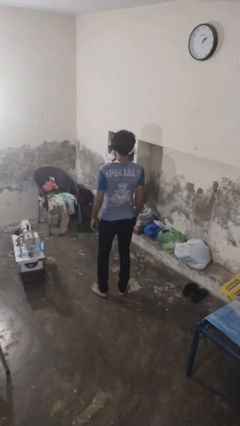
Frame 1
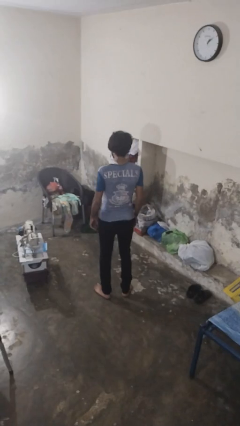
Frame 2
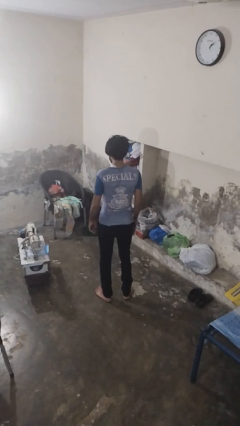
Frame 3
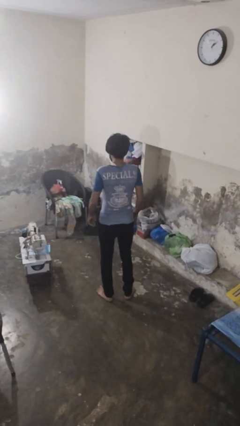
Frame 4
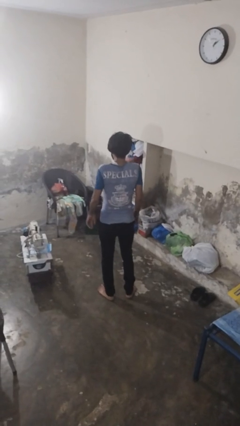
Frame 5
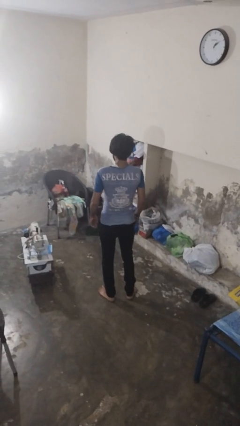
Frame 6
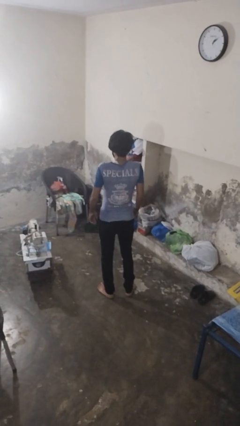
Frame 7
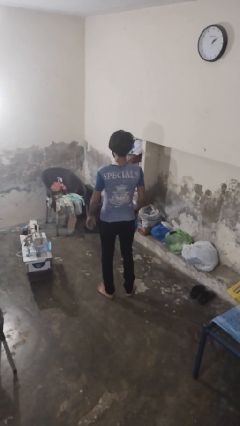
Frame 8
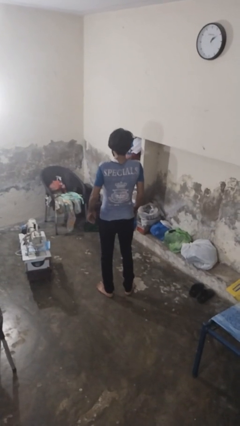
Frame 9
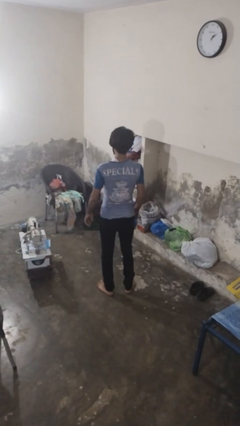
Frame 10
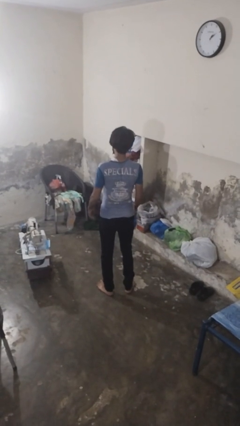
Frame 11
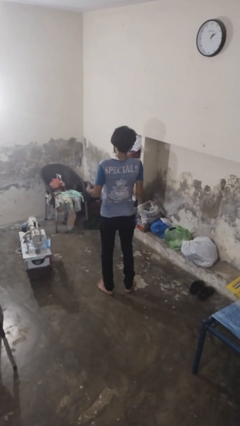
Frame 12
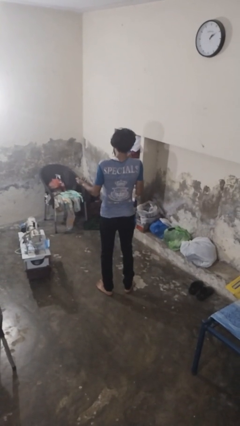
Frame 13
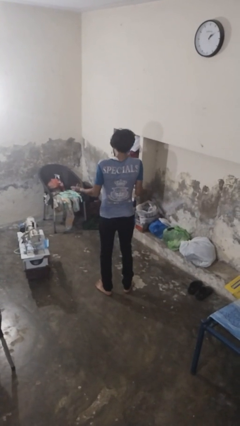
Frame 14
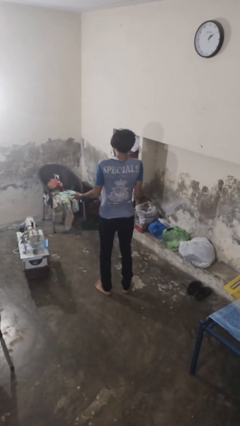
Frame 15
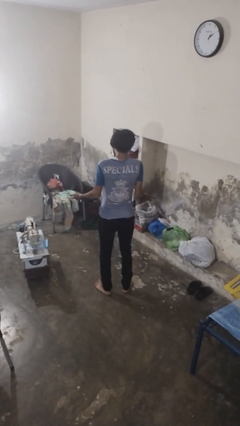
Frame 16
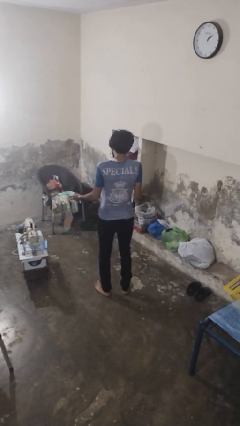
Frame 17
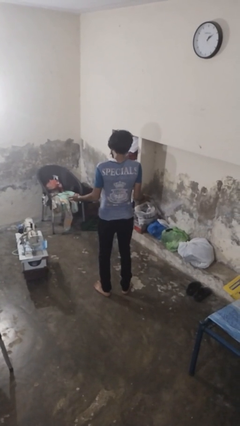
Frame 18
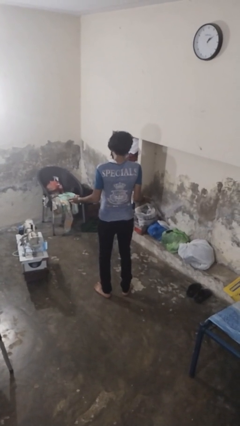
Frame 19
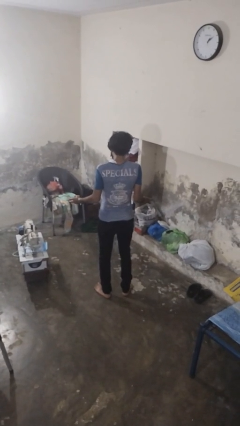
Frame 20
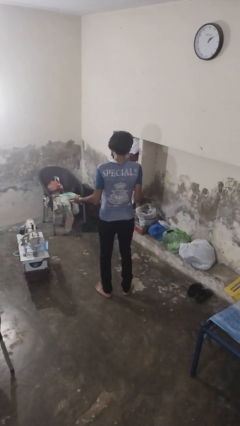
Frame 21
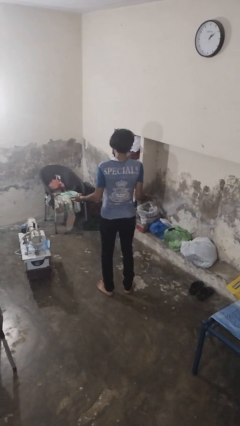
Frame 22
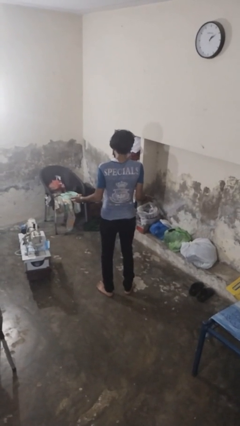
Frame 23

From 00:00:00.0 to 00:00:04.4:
person shrugs

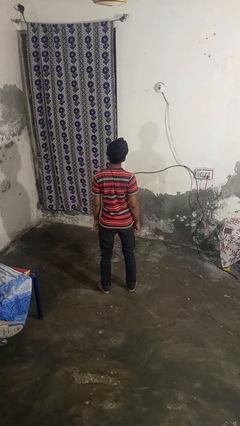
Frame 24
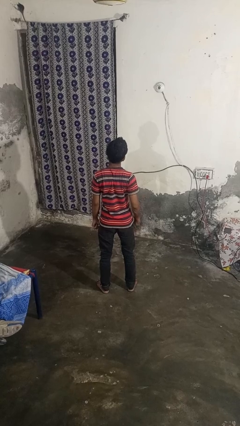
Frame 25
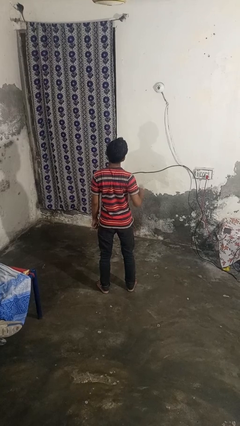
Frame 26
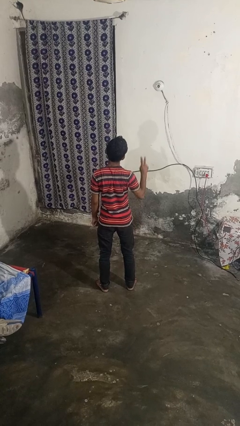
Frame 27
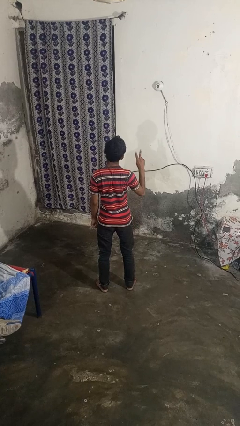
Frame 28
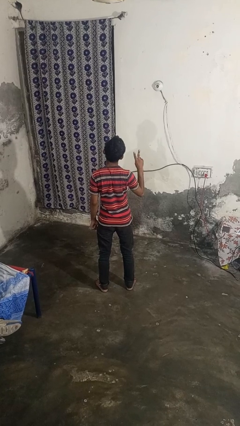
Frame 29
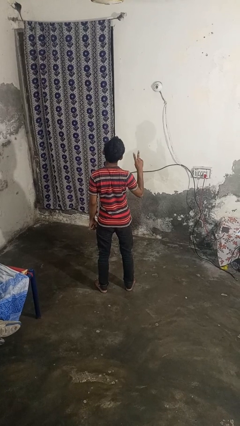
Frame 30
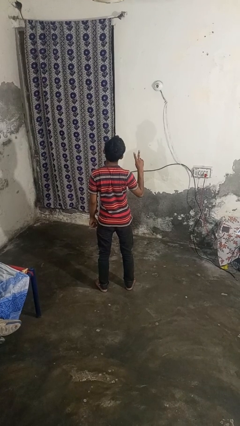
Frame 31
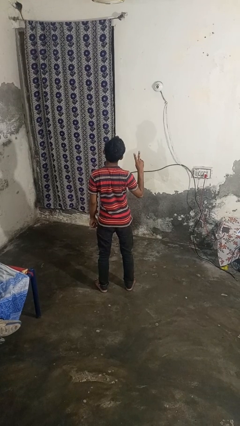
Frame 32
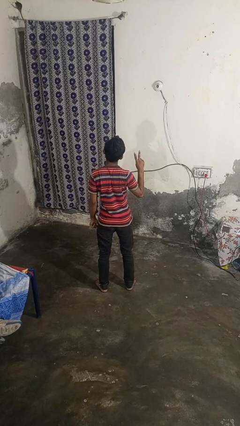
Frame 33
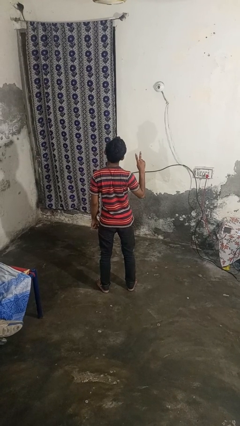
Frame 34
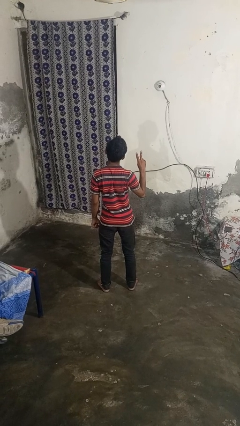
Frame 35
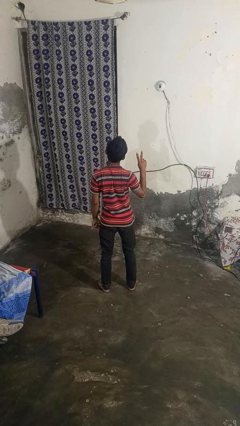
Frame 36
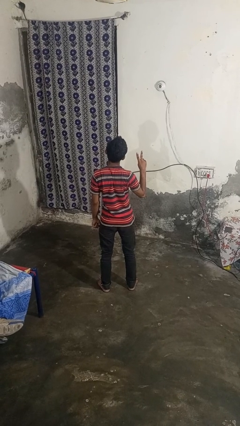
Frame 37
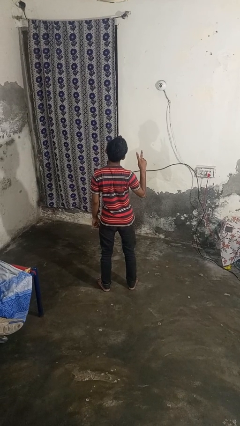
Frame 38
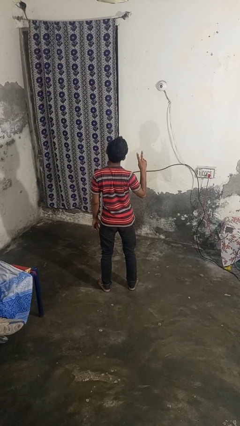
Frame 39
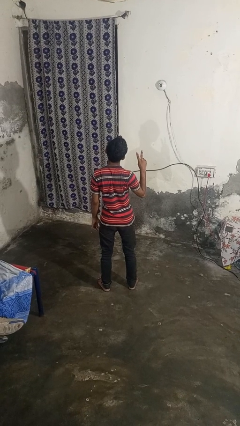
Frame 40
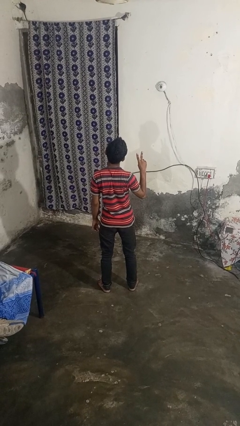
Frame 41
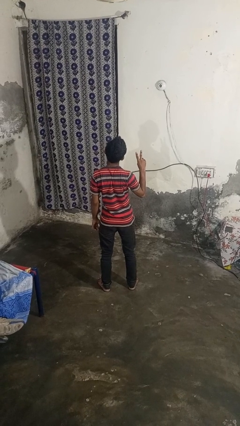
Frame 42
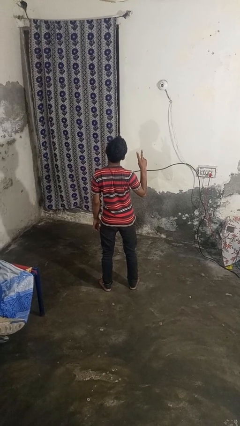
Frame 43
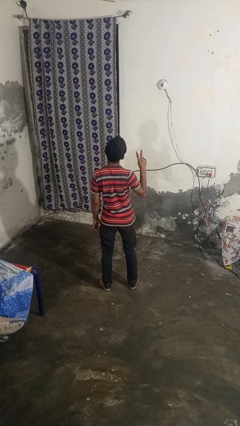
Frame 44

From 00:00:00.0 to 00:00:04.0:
person gestures peace

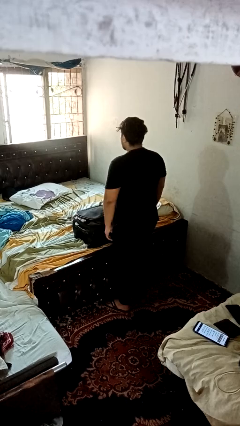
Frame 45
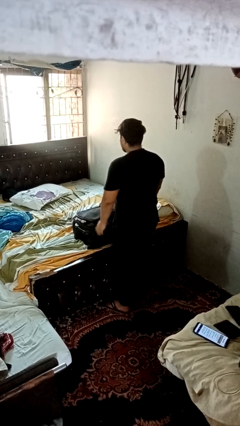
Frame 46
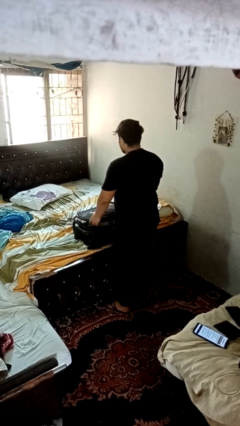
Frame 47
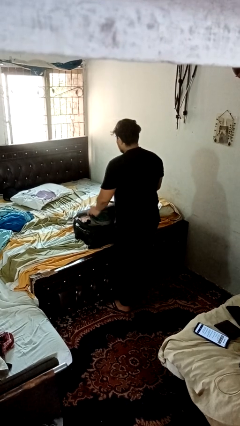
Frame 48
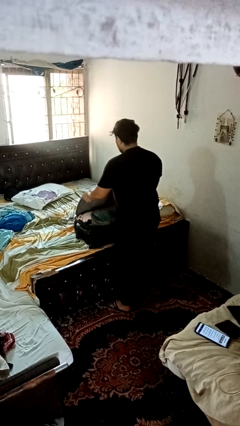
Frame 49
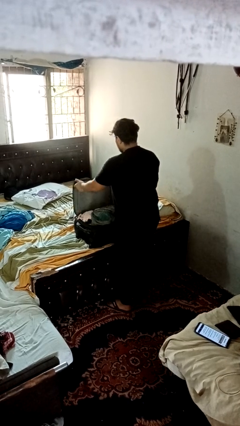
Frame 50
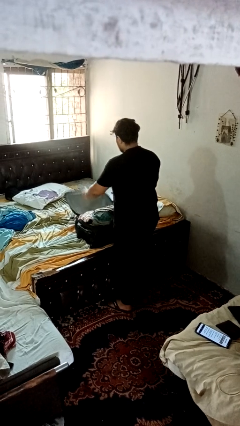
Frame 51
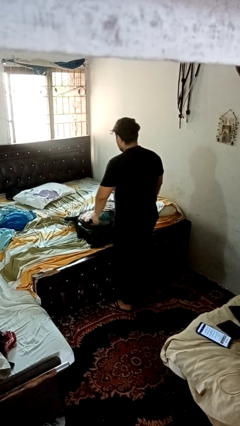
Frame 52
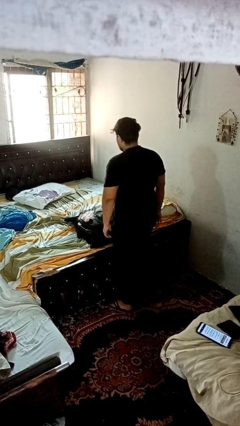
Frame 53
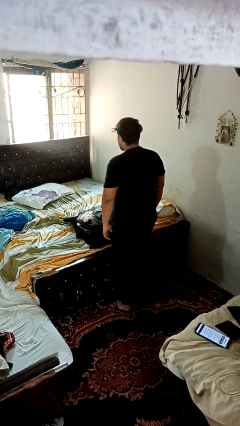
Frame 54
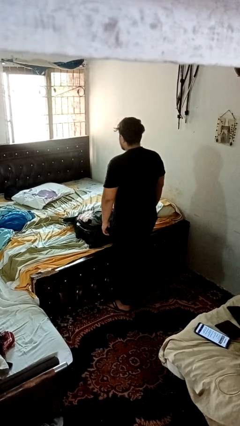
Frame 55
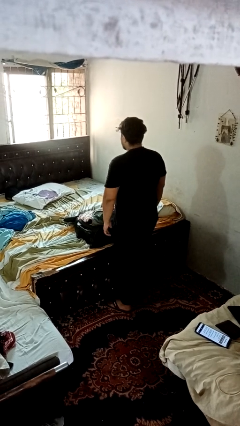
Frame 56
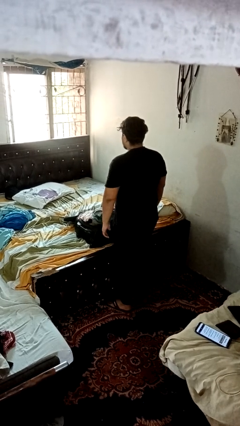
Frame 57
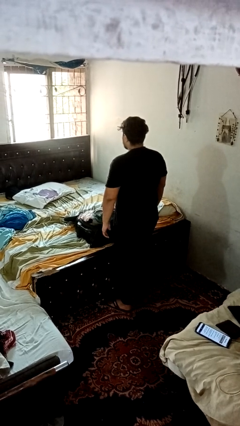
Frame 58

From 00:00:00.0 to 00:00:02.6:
person opens suitcase

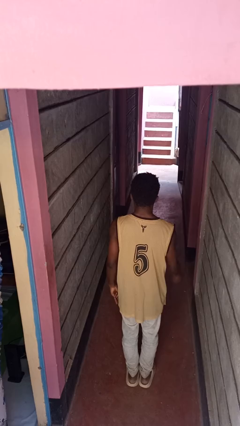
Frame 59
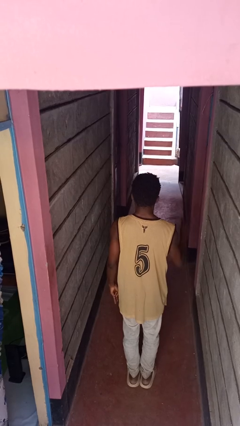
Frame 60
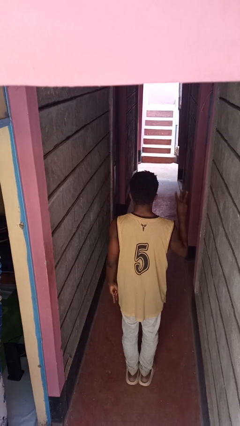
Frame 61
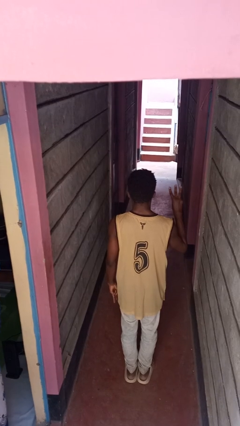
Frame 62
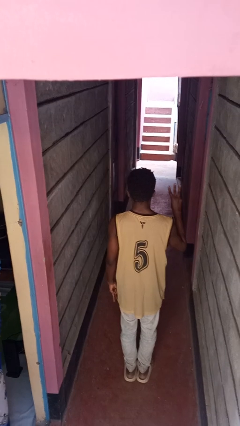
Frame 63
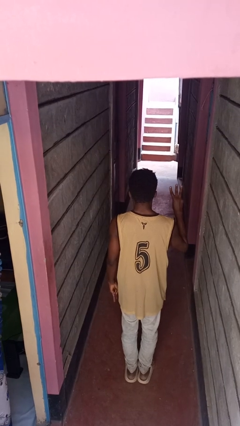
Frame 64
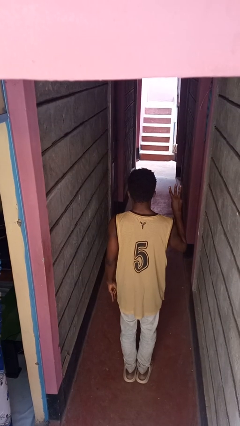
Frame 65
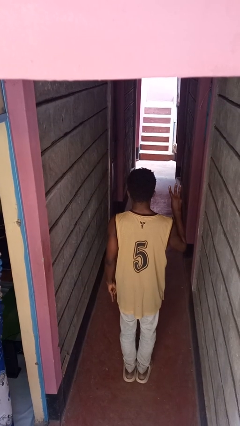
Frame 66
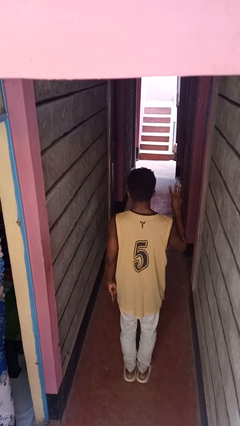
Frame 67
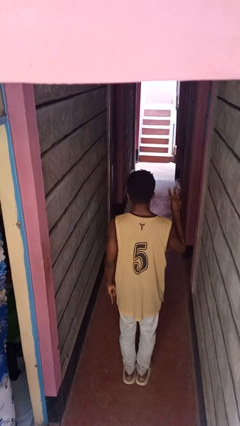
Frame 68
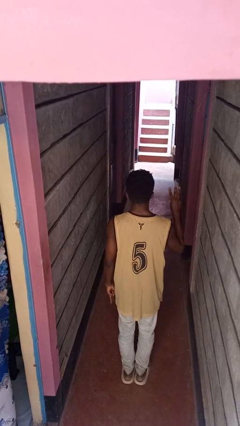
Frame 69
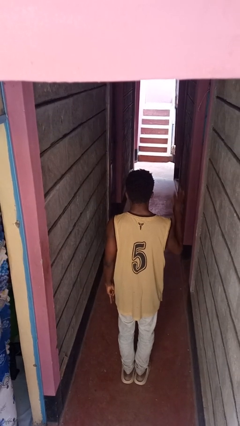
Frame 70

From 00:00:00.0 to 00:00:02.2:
person gestures number three

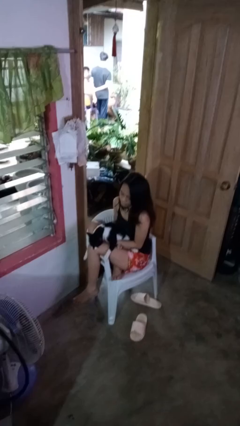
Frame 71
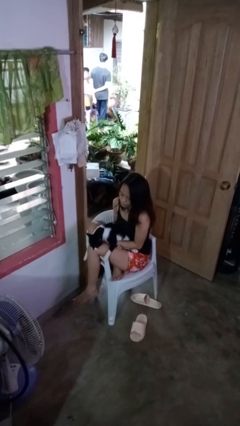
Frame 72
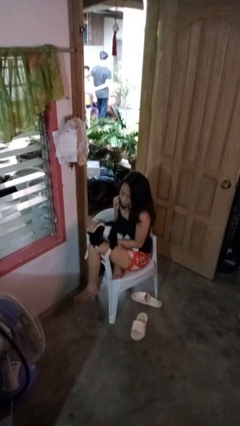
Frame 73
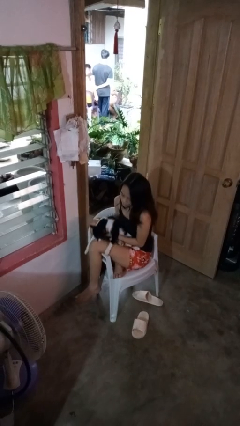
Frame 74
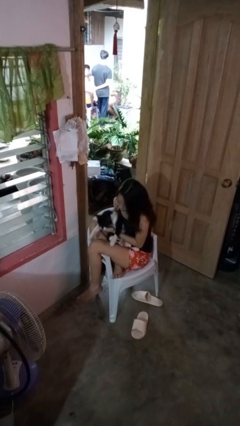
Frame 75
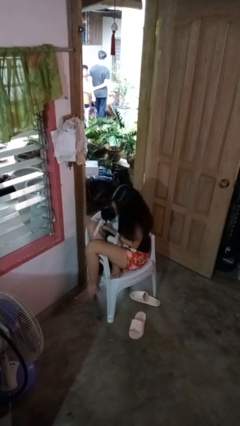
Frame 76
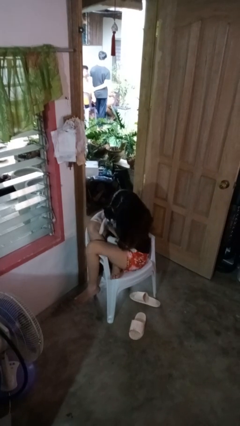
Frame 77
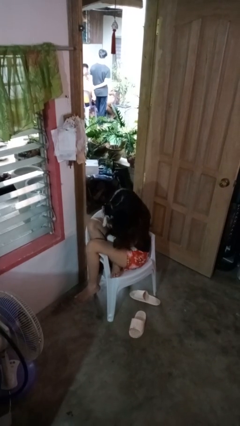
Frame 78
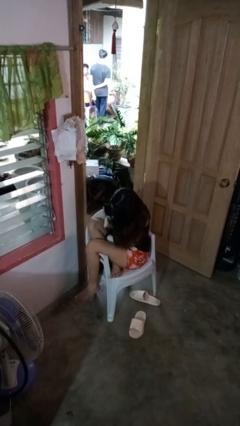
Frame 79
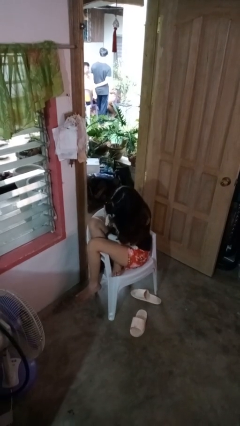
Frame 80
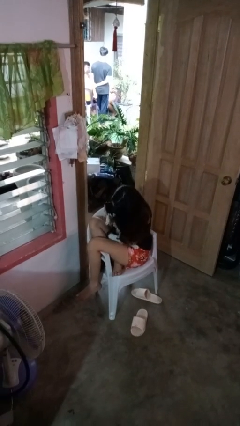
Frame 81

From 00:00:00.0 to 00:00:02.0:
person hugs cat

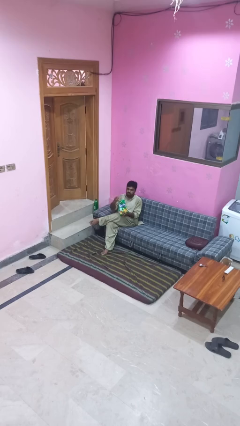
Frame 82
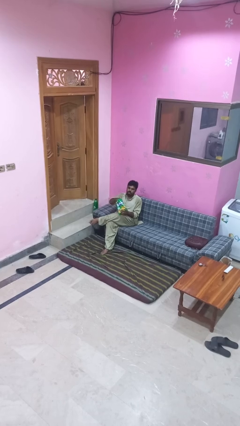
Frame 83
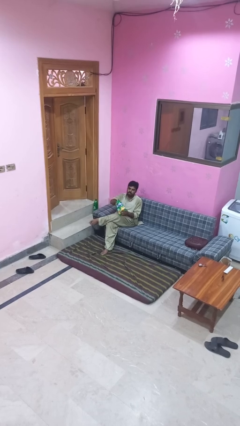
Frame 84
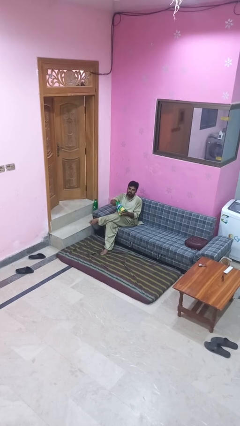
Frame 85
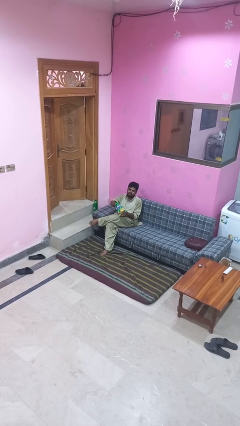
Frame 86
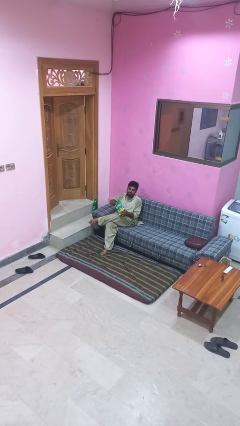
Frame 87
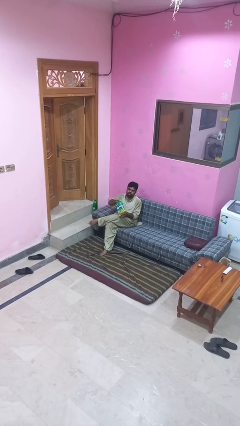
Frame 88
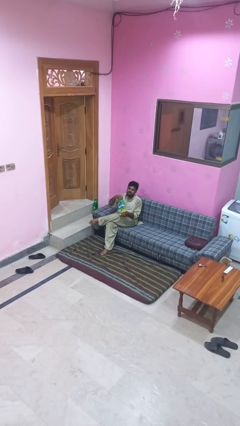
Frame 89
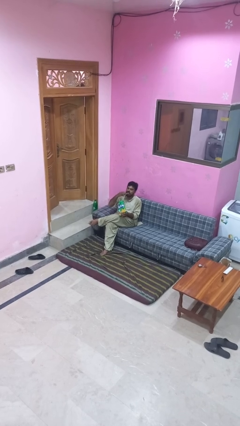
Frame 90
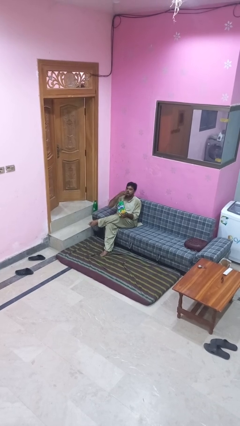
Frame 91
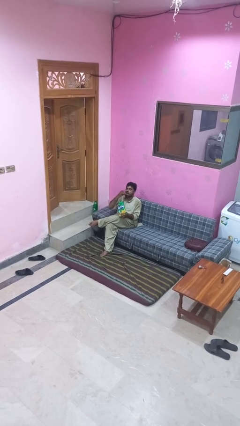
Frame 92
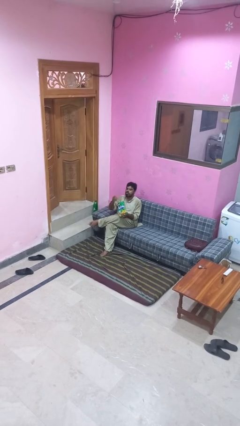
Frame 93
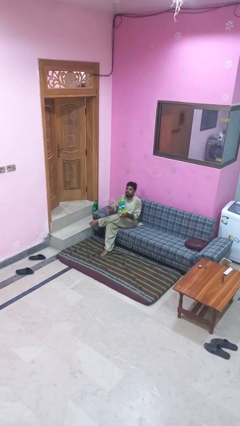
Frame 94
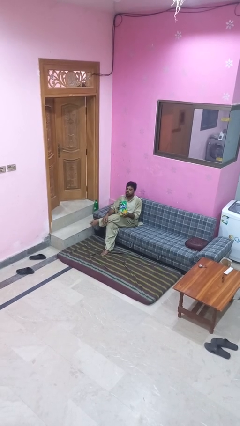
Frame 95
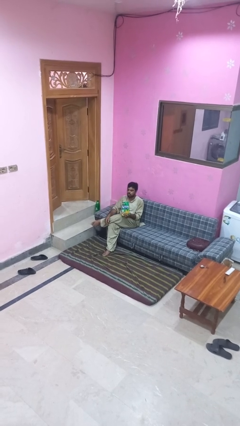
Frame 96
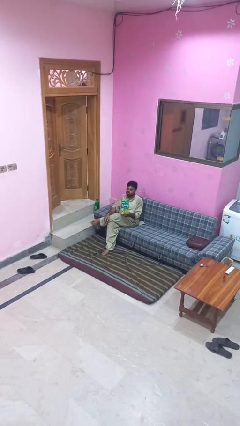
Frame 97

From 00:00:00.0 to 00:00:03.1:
person eats snack from bag
